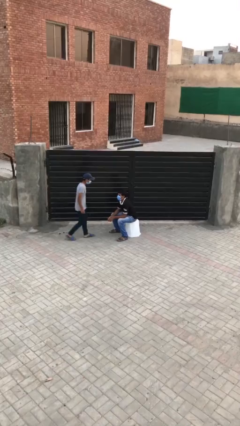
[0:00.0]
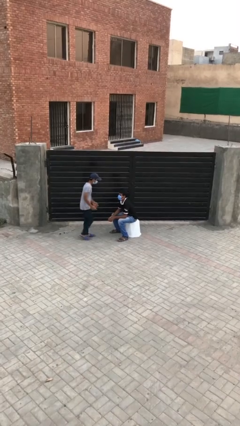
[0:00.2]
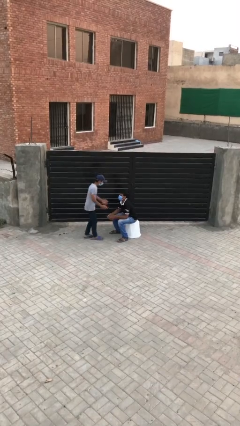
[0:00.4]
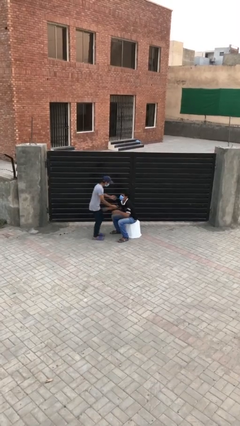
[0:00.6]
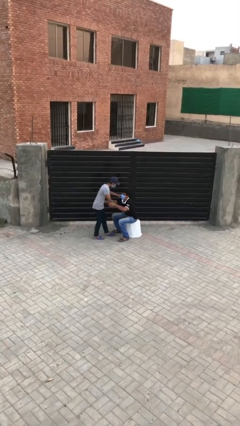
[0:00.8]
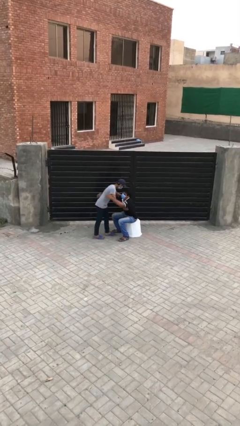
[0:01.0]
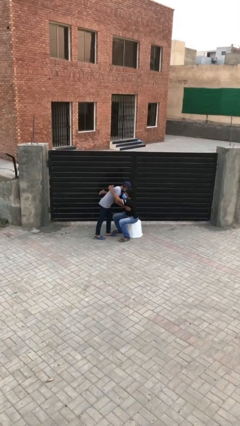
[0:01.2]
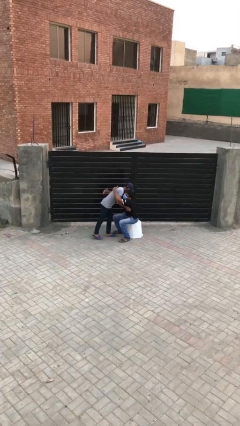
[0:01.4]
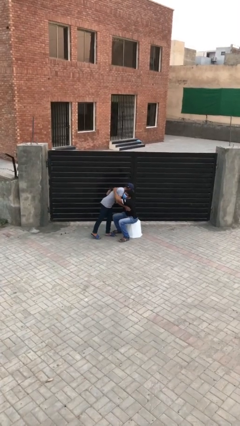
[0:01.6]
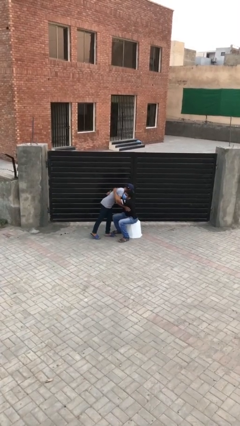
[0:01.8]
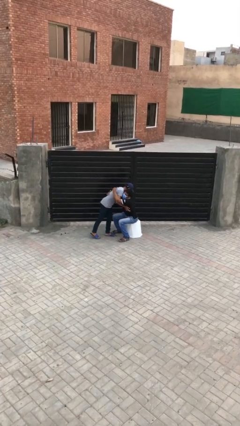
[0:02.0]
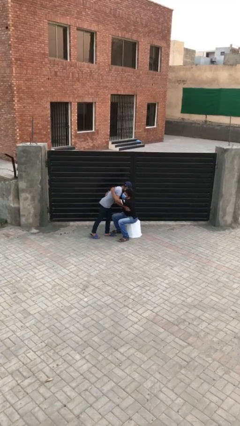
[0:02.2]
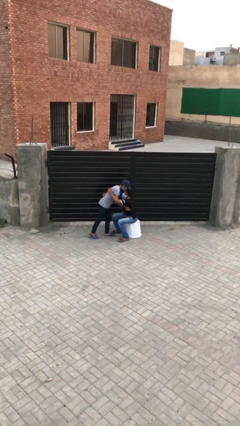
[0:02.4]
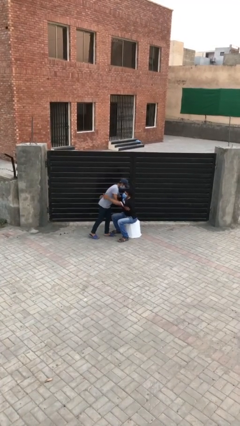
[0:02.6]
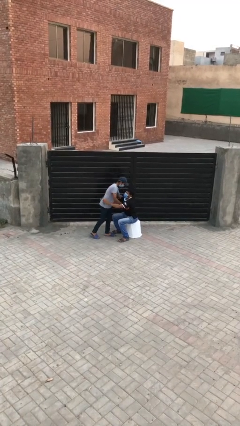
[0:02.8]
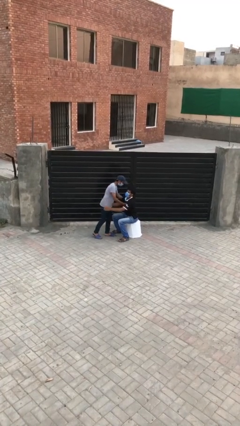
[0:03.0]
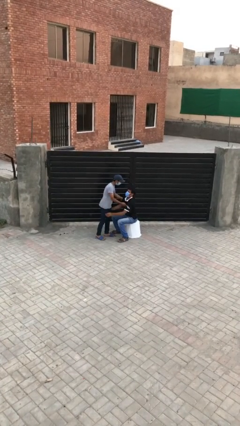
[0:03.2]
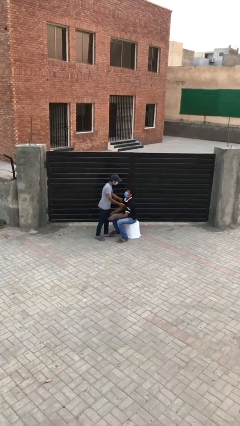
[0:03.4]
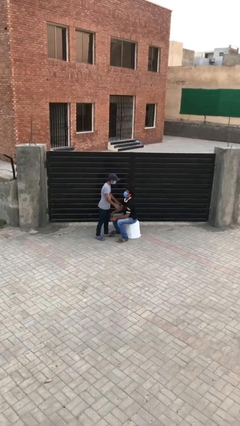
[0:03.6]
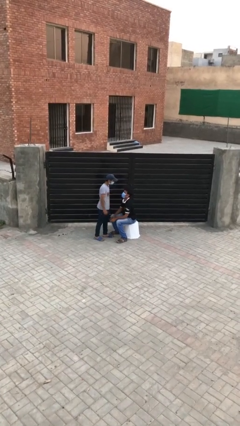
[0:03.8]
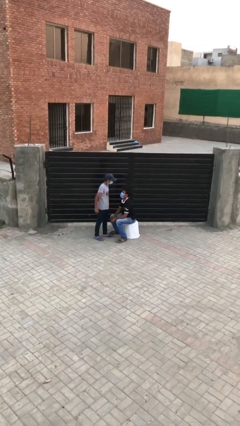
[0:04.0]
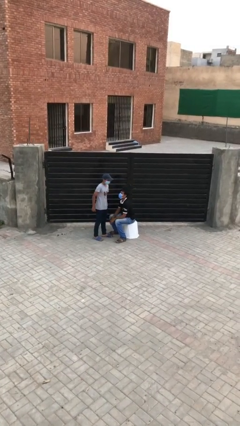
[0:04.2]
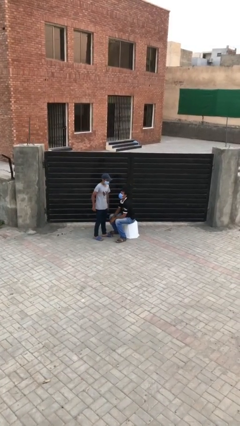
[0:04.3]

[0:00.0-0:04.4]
person embraces person

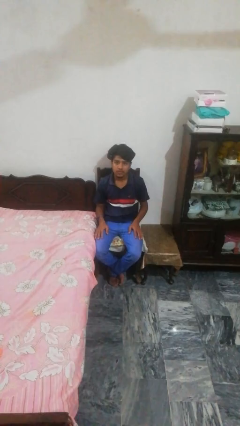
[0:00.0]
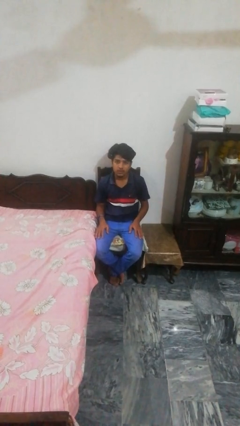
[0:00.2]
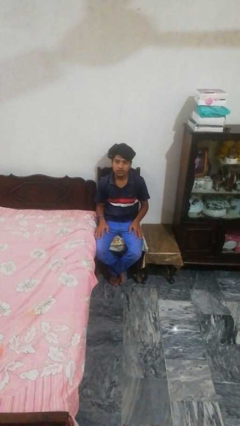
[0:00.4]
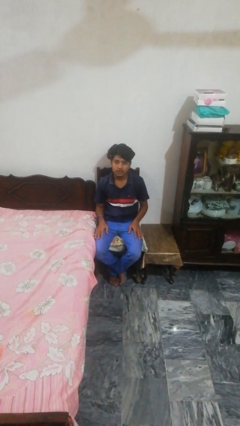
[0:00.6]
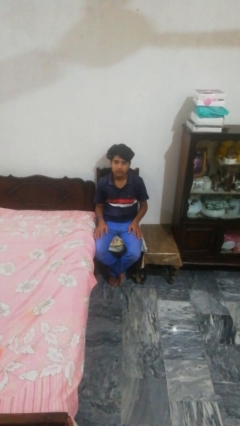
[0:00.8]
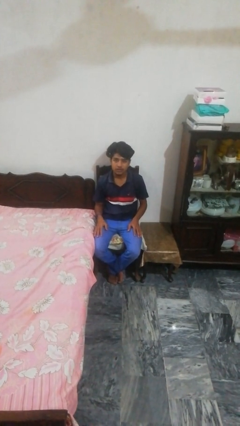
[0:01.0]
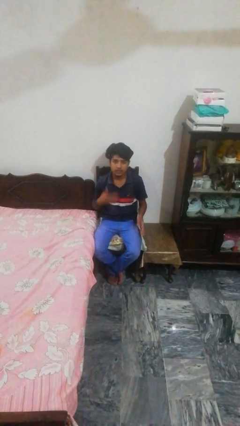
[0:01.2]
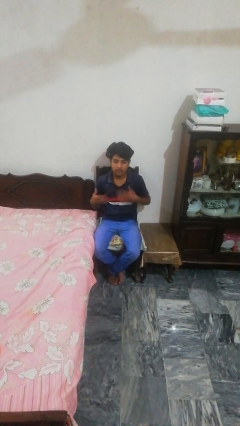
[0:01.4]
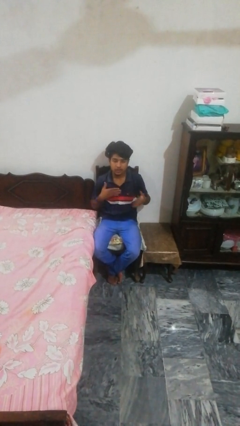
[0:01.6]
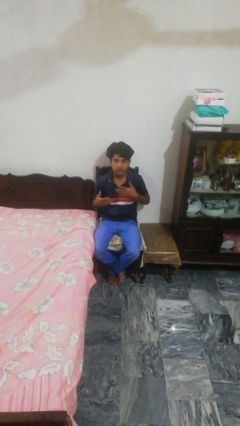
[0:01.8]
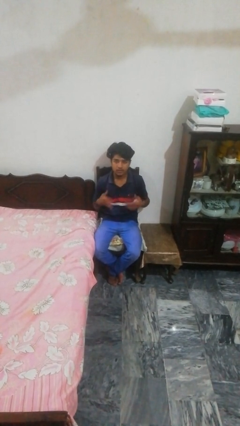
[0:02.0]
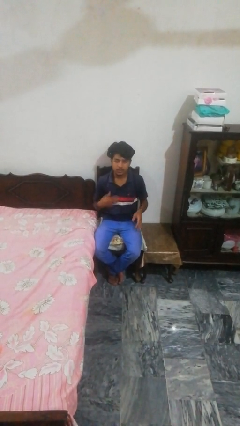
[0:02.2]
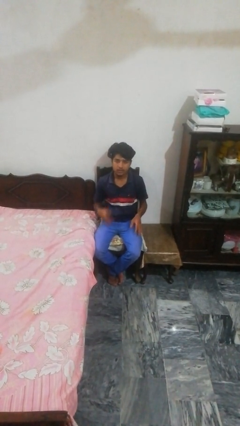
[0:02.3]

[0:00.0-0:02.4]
person drums on chest

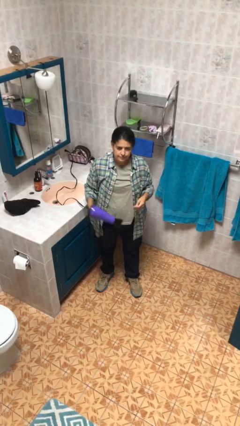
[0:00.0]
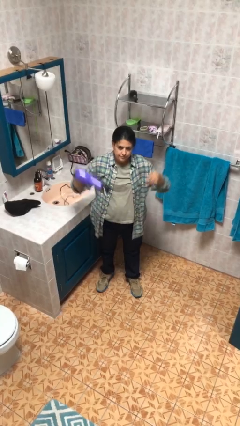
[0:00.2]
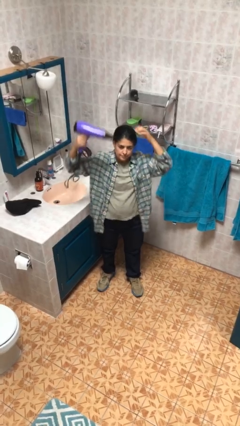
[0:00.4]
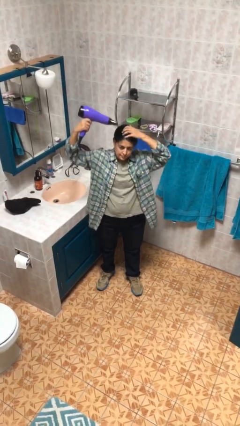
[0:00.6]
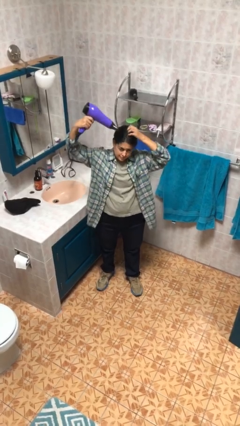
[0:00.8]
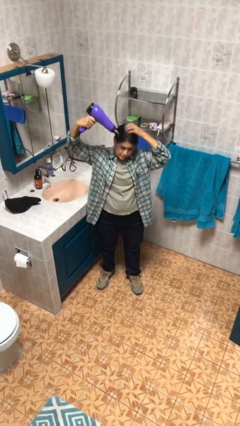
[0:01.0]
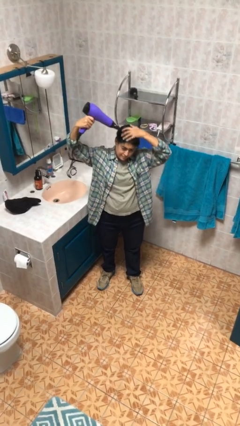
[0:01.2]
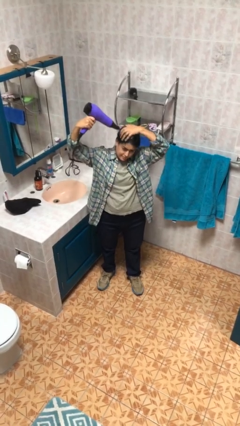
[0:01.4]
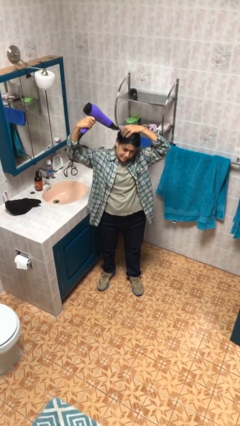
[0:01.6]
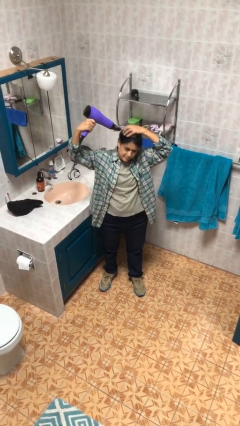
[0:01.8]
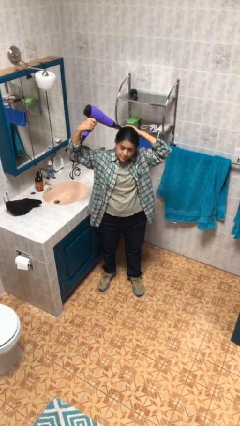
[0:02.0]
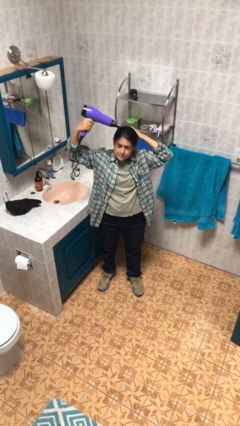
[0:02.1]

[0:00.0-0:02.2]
person dries hair with hairdryer

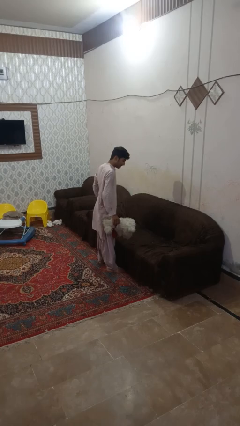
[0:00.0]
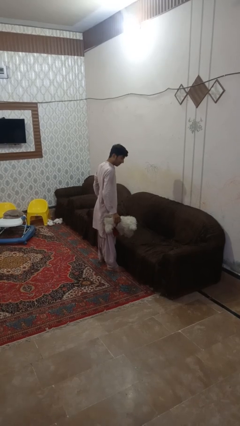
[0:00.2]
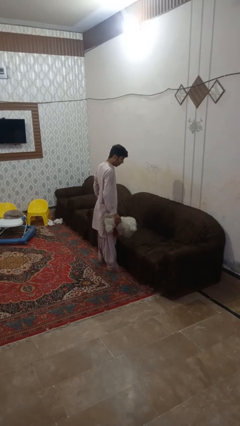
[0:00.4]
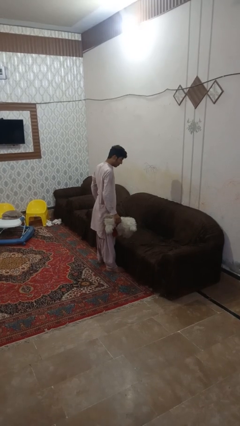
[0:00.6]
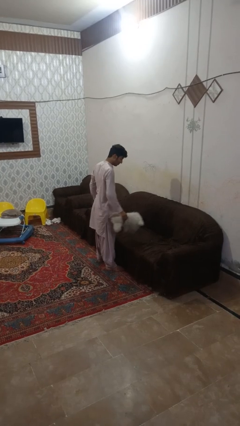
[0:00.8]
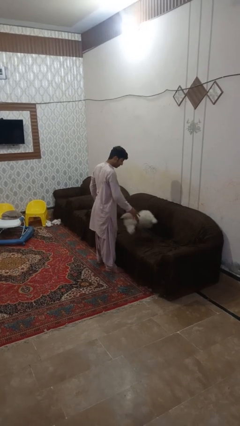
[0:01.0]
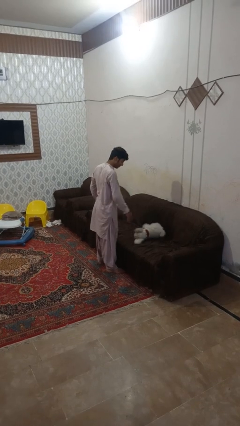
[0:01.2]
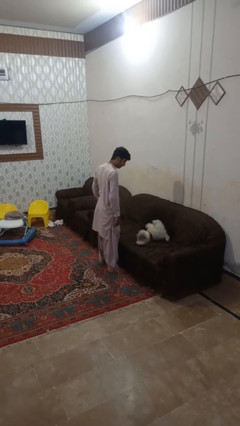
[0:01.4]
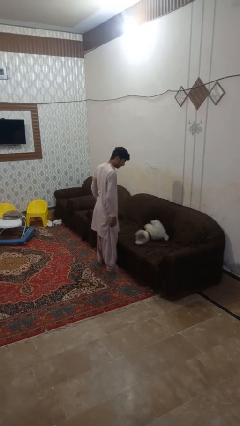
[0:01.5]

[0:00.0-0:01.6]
person puts down object on couch

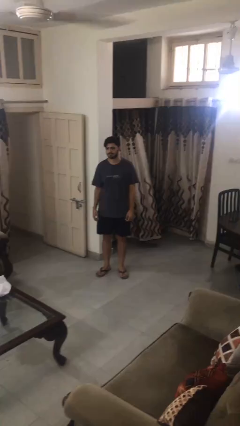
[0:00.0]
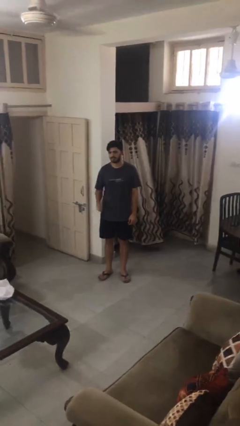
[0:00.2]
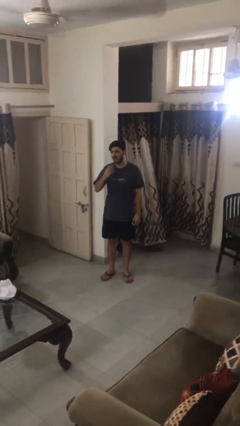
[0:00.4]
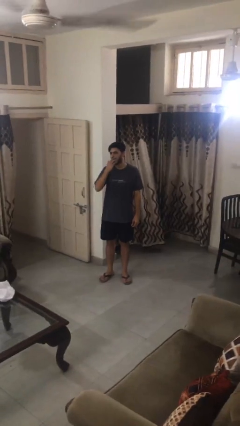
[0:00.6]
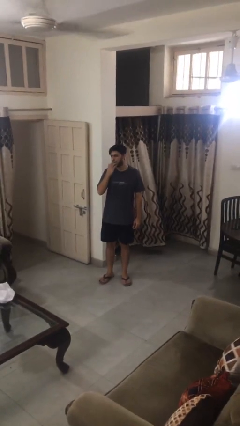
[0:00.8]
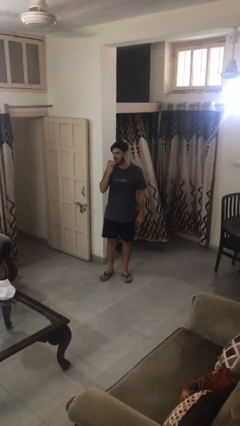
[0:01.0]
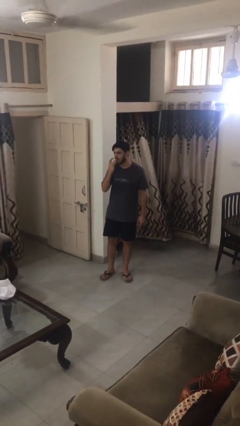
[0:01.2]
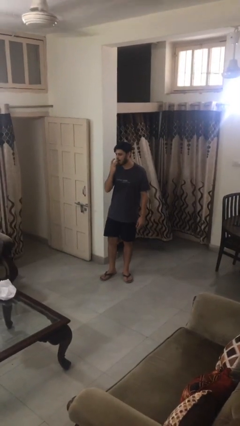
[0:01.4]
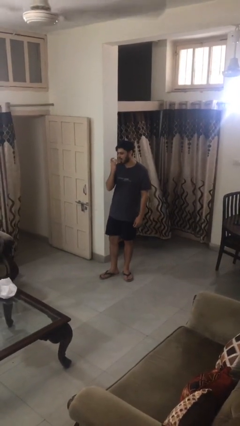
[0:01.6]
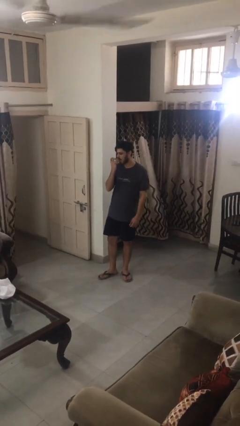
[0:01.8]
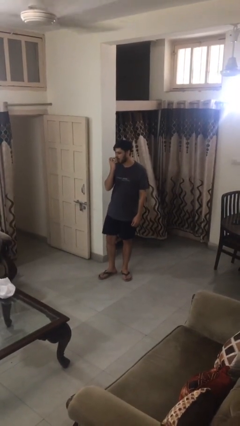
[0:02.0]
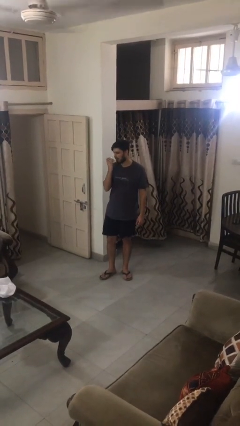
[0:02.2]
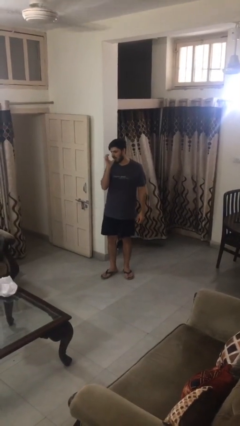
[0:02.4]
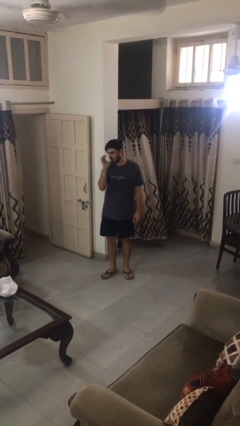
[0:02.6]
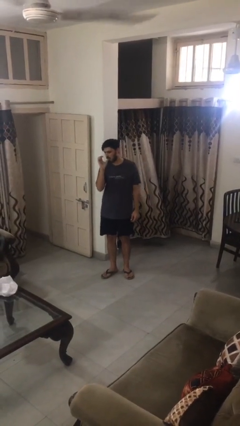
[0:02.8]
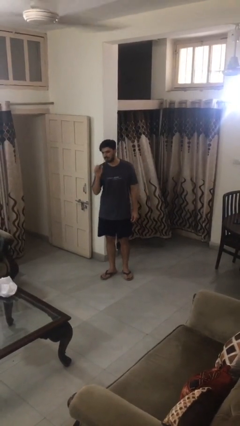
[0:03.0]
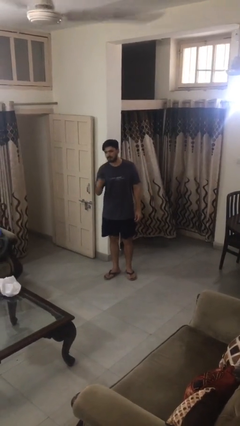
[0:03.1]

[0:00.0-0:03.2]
person licks fingers

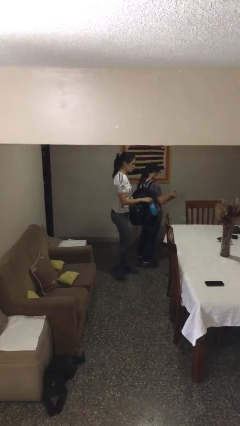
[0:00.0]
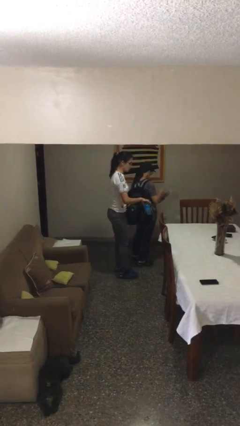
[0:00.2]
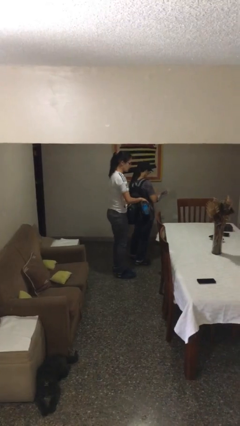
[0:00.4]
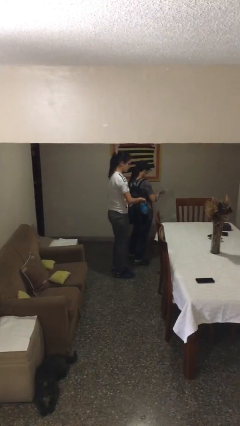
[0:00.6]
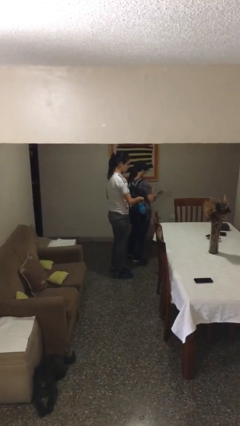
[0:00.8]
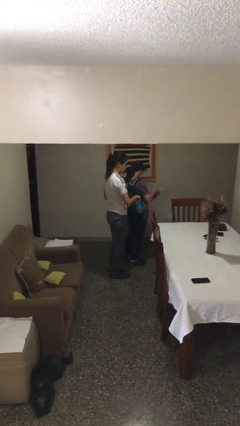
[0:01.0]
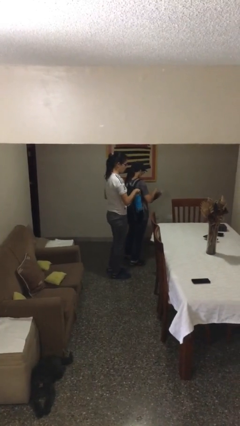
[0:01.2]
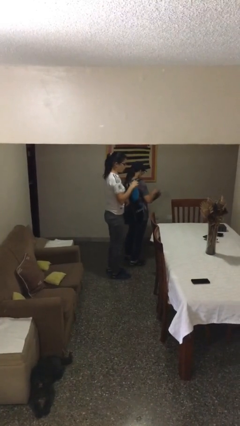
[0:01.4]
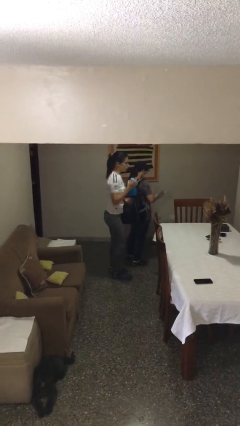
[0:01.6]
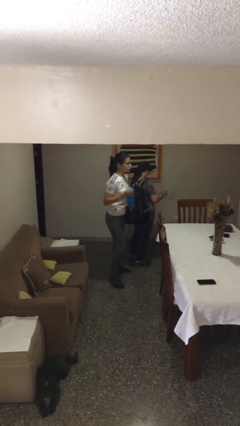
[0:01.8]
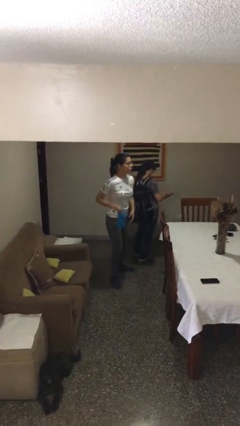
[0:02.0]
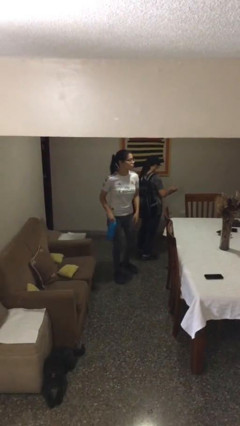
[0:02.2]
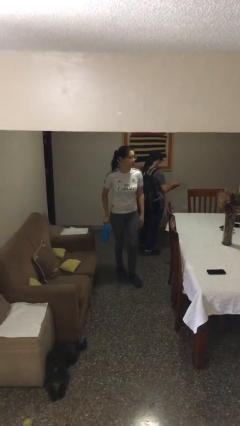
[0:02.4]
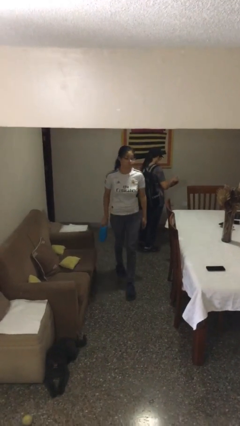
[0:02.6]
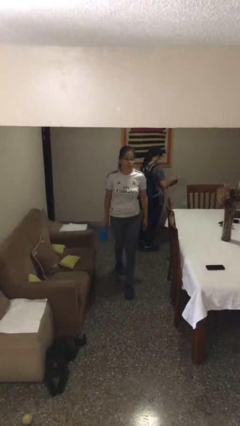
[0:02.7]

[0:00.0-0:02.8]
person steals object from person

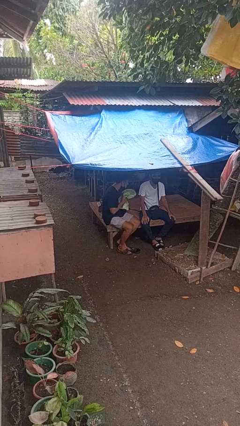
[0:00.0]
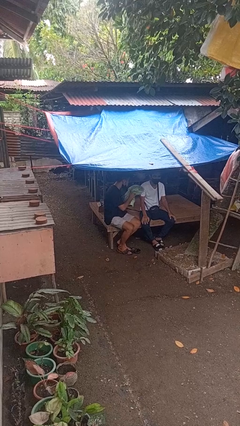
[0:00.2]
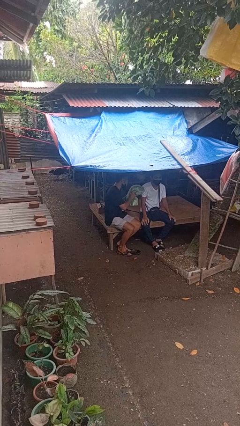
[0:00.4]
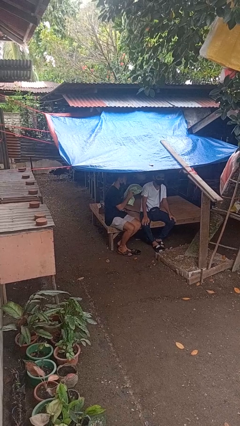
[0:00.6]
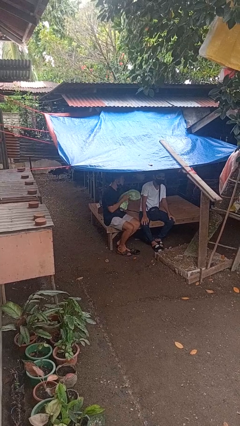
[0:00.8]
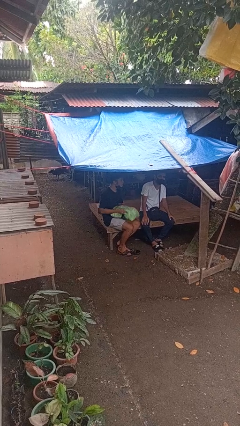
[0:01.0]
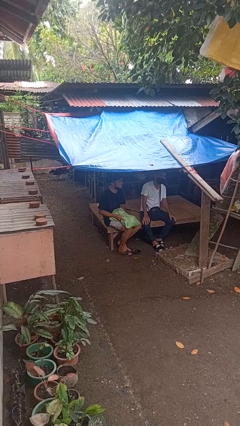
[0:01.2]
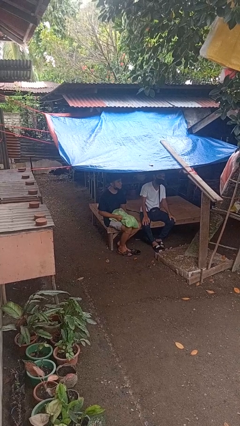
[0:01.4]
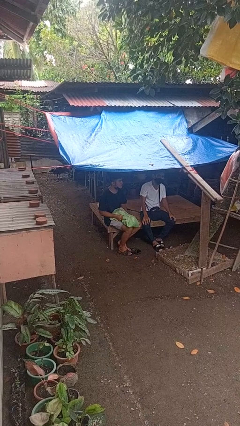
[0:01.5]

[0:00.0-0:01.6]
person hits person with pillow
